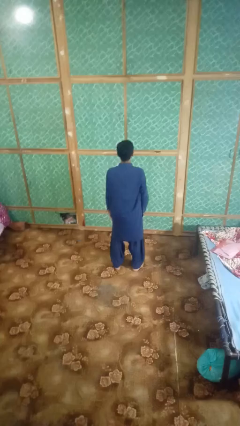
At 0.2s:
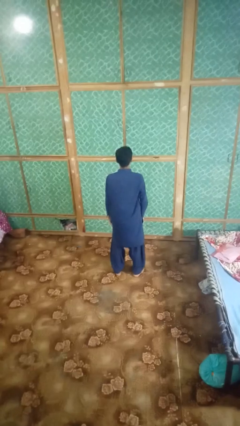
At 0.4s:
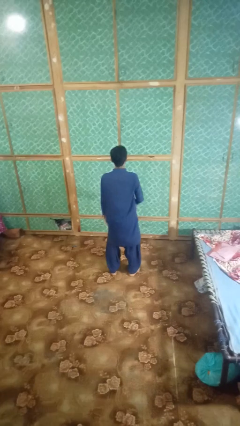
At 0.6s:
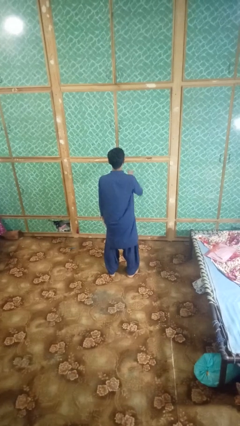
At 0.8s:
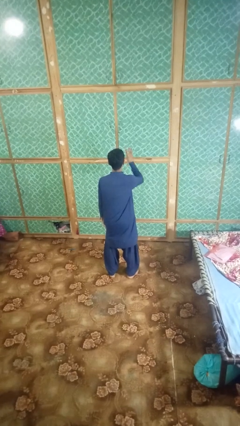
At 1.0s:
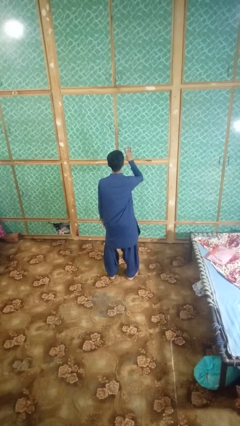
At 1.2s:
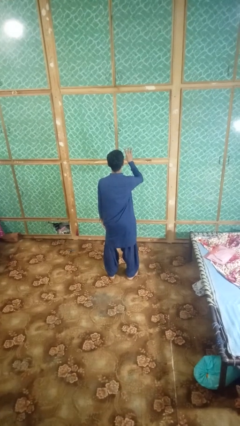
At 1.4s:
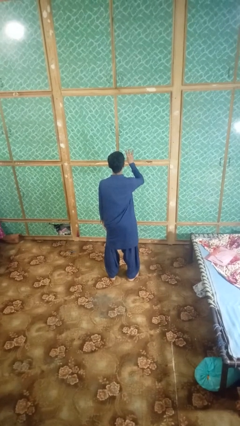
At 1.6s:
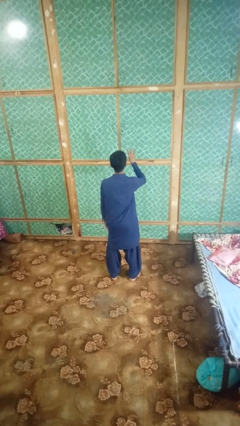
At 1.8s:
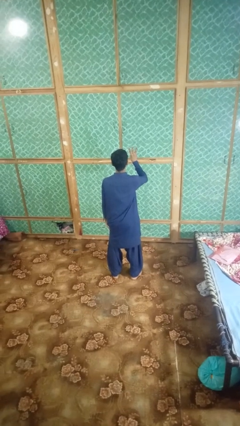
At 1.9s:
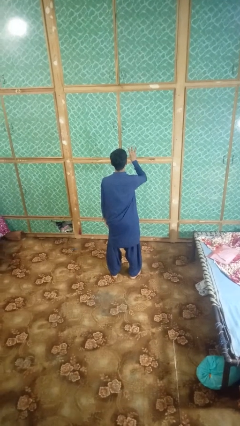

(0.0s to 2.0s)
person gestures number three

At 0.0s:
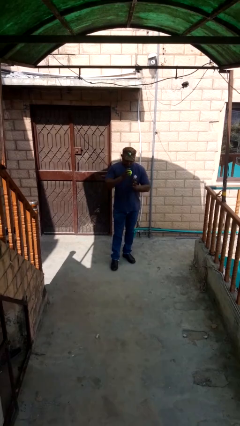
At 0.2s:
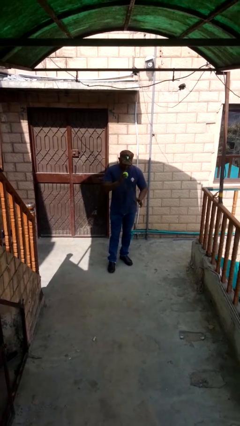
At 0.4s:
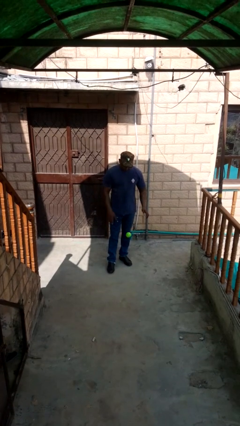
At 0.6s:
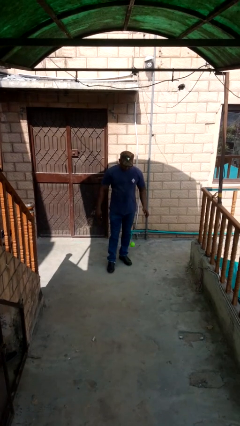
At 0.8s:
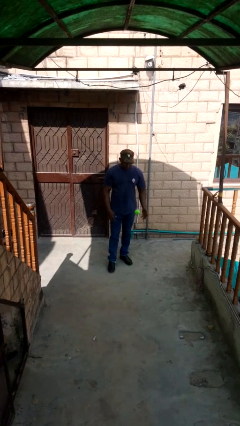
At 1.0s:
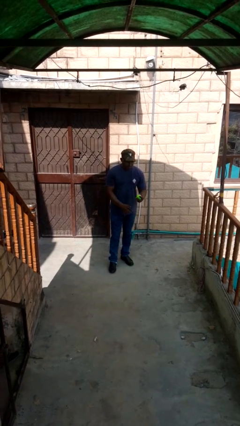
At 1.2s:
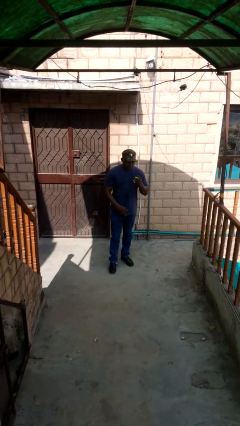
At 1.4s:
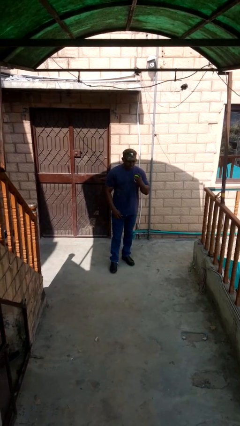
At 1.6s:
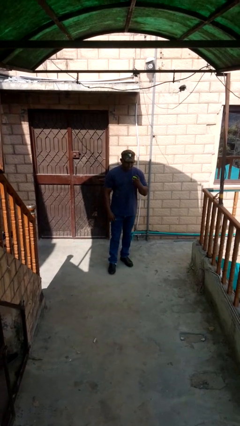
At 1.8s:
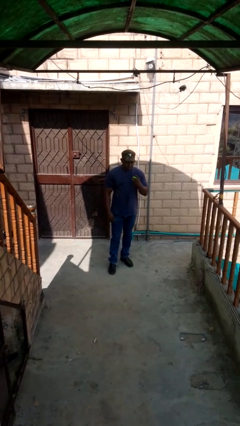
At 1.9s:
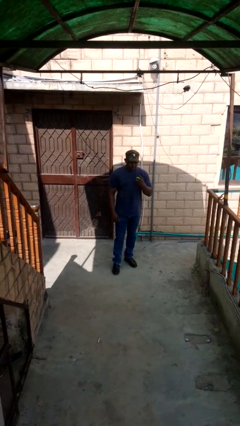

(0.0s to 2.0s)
person bounces ball on floor

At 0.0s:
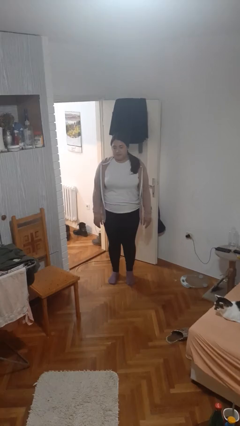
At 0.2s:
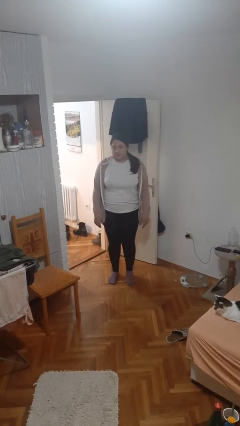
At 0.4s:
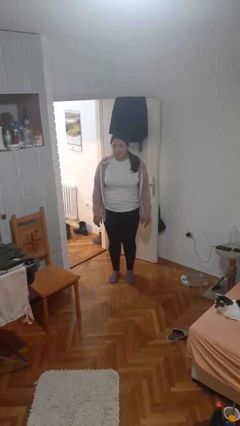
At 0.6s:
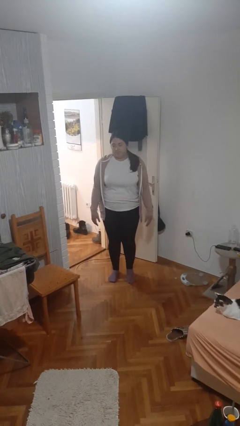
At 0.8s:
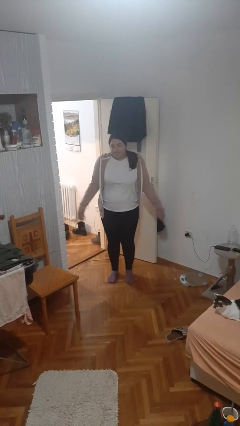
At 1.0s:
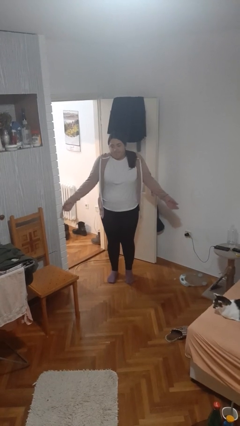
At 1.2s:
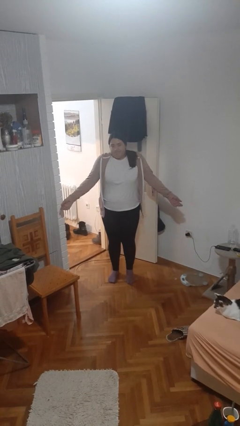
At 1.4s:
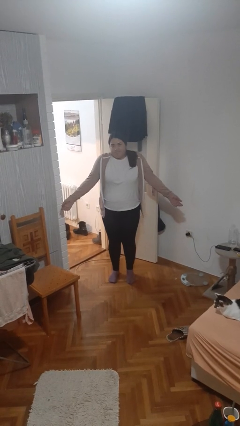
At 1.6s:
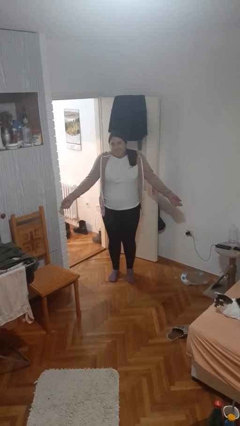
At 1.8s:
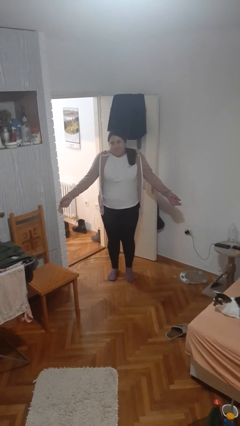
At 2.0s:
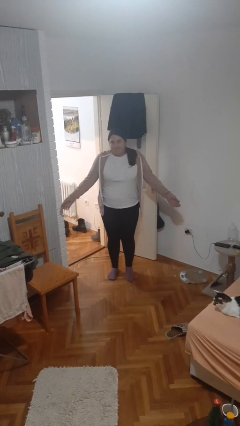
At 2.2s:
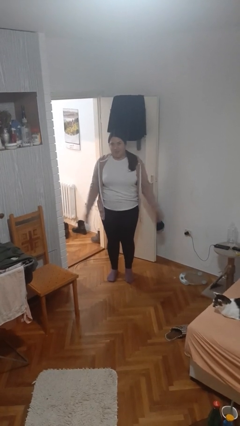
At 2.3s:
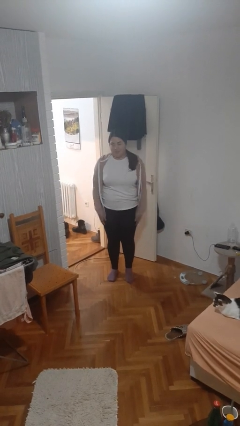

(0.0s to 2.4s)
person shrugs

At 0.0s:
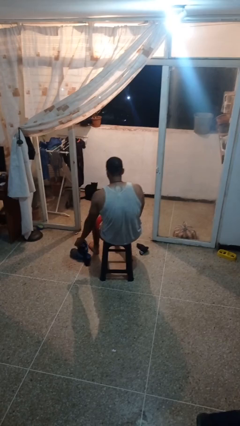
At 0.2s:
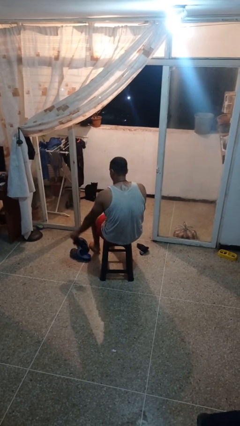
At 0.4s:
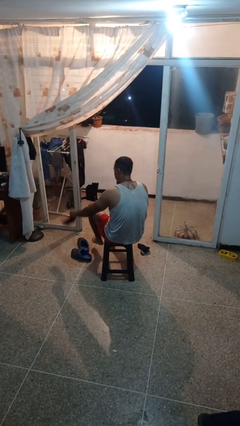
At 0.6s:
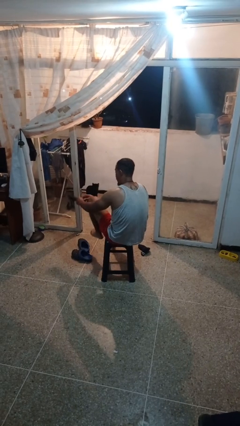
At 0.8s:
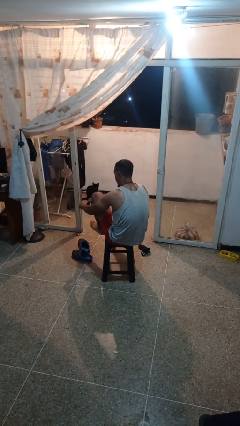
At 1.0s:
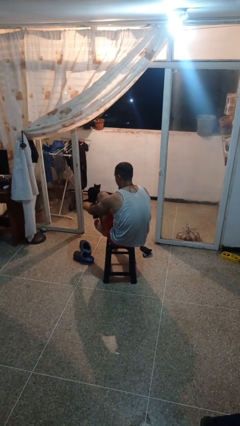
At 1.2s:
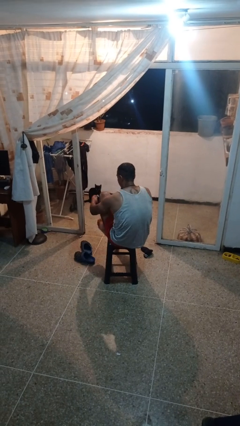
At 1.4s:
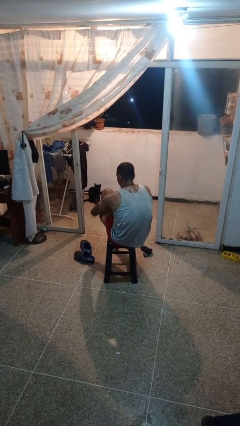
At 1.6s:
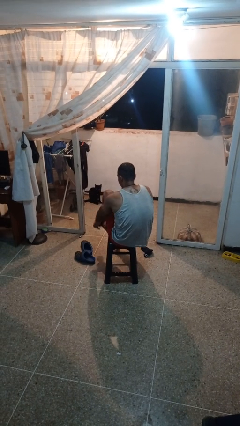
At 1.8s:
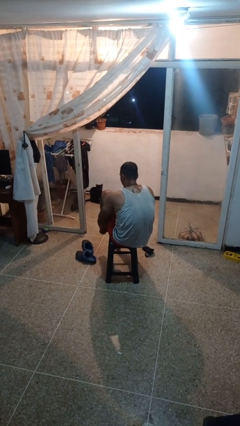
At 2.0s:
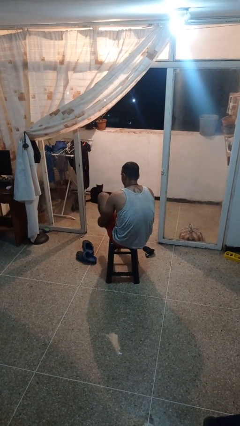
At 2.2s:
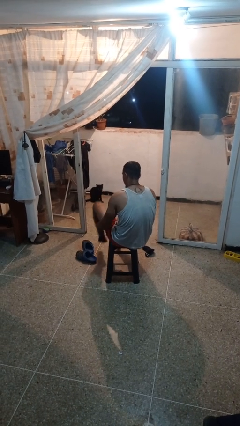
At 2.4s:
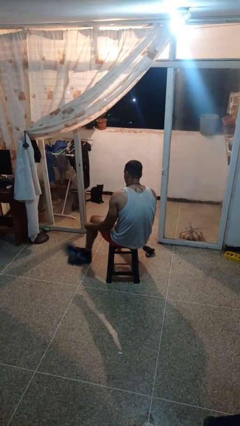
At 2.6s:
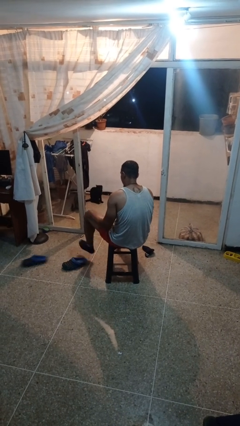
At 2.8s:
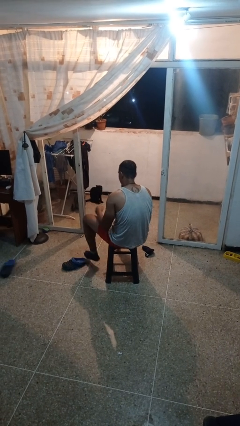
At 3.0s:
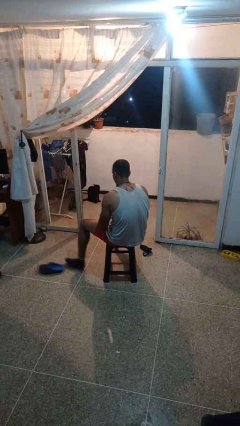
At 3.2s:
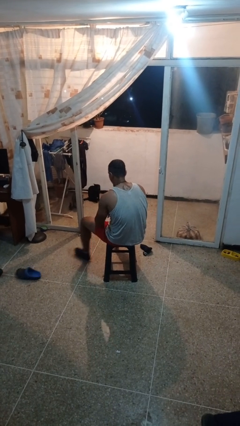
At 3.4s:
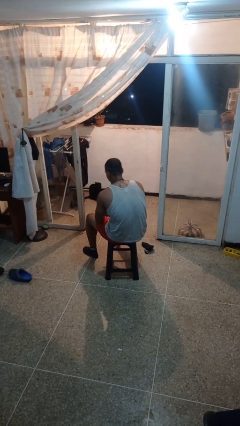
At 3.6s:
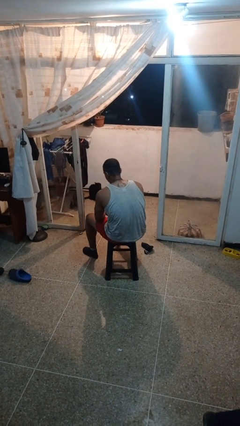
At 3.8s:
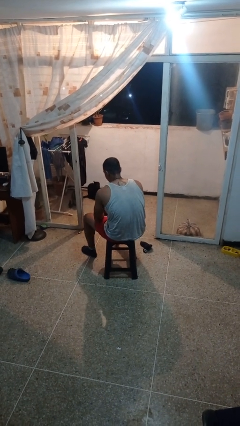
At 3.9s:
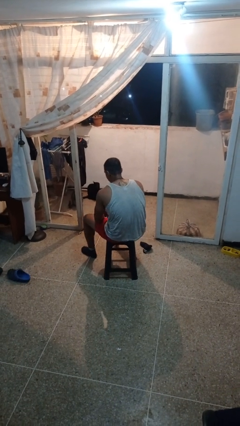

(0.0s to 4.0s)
person puts on socks

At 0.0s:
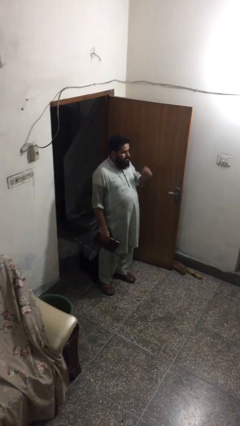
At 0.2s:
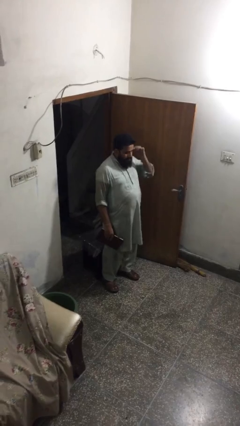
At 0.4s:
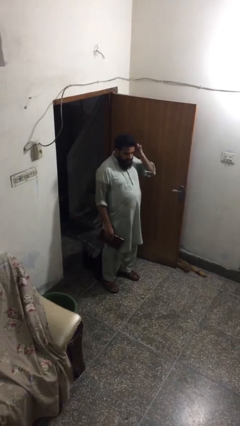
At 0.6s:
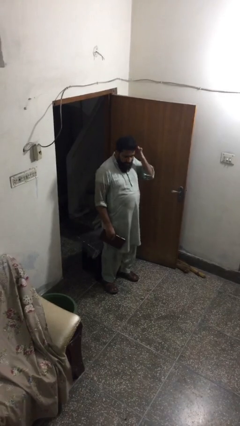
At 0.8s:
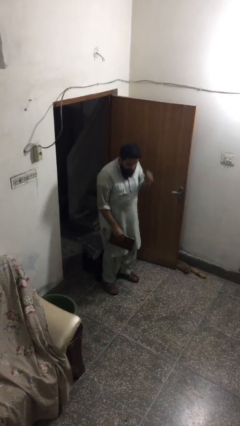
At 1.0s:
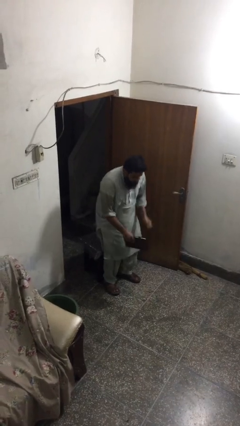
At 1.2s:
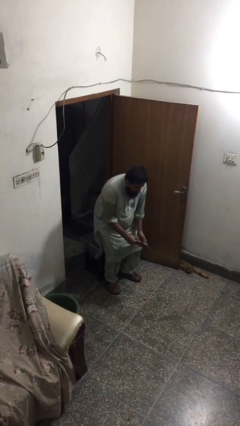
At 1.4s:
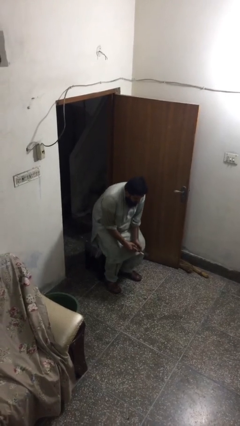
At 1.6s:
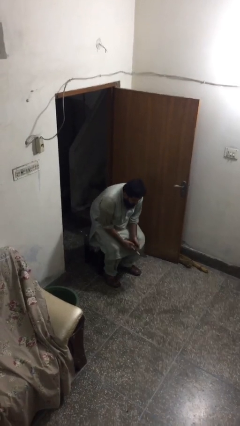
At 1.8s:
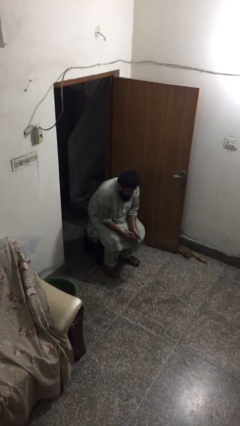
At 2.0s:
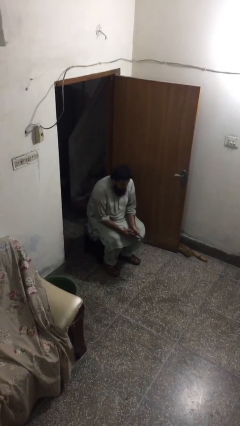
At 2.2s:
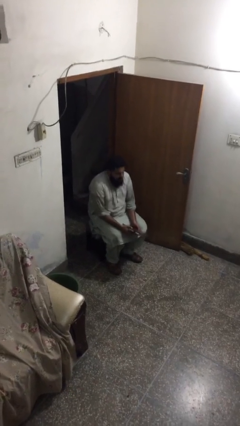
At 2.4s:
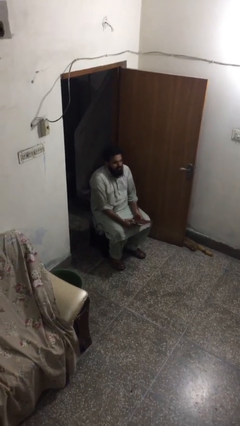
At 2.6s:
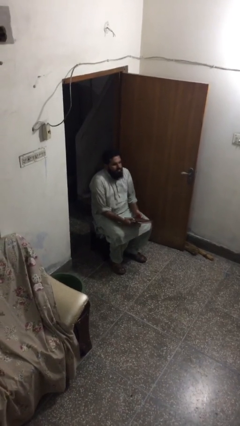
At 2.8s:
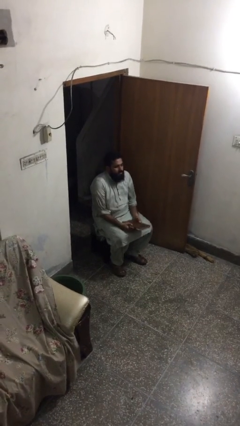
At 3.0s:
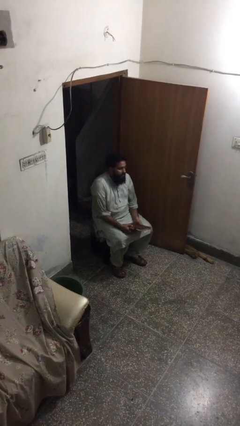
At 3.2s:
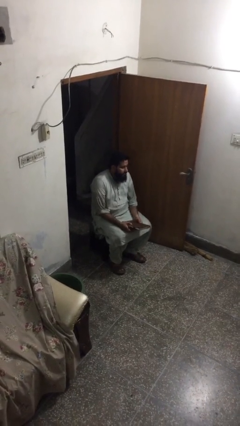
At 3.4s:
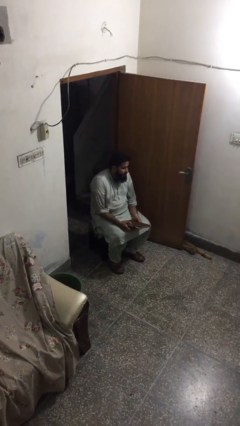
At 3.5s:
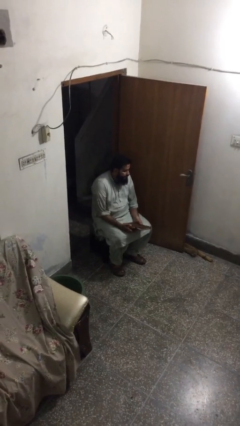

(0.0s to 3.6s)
person sits down

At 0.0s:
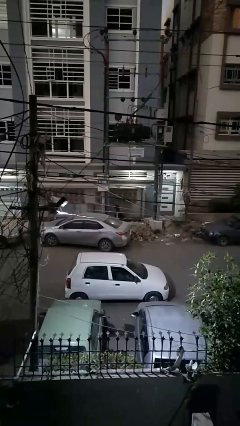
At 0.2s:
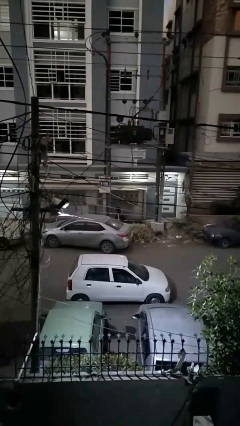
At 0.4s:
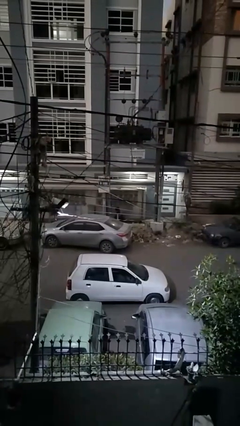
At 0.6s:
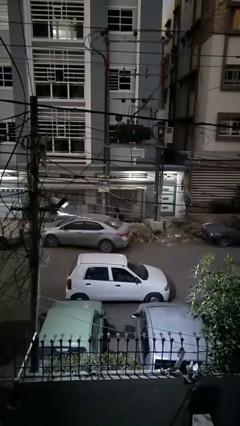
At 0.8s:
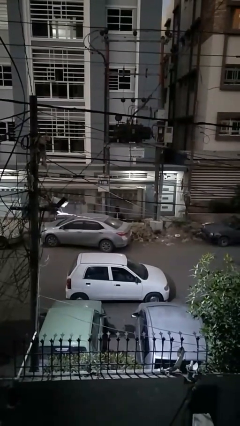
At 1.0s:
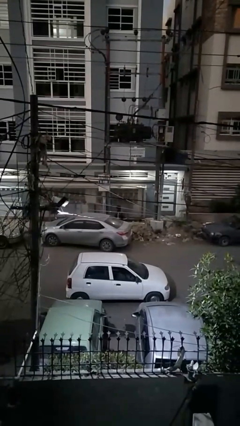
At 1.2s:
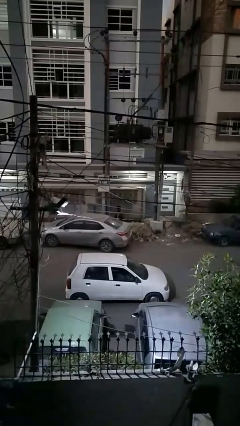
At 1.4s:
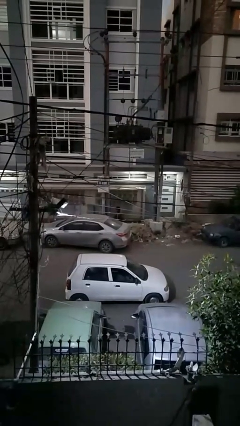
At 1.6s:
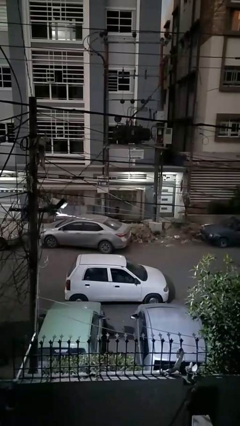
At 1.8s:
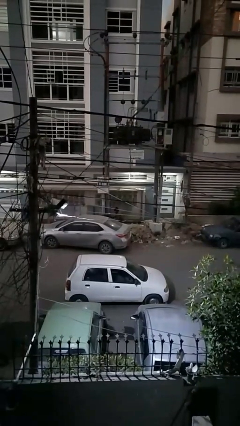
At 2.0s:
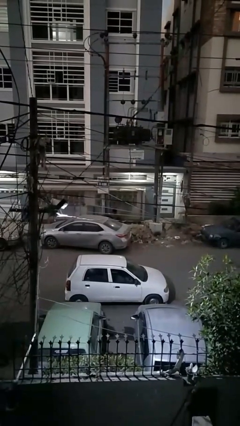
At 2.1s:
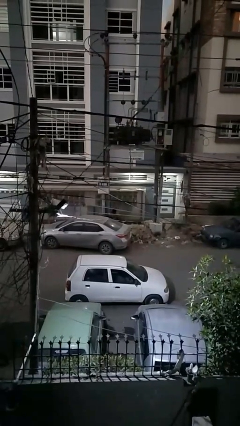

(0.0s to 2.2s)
person unloads car

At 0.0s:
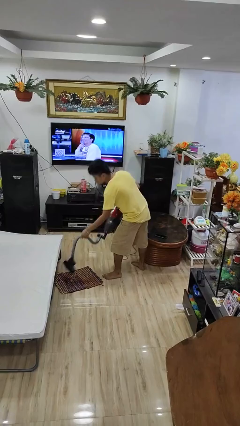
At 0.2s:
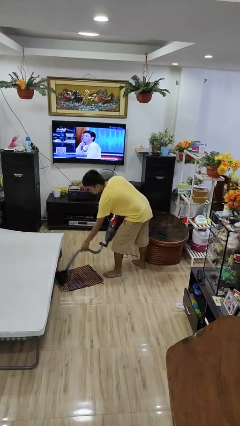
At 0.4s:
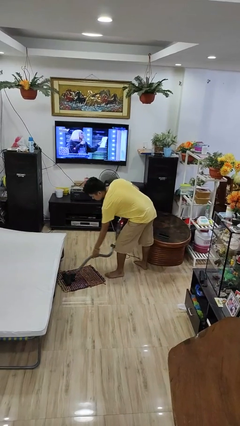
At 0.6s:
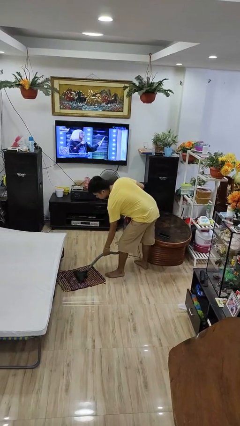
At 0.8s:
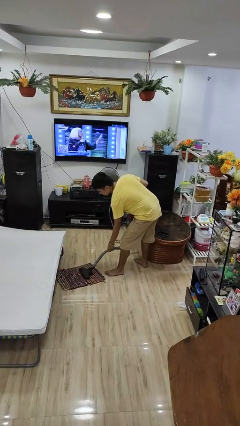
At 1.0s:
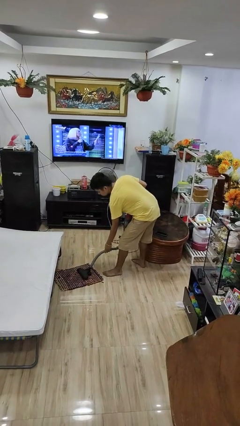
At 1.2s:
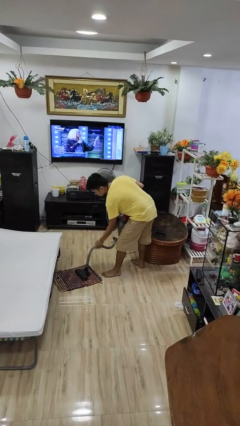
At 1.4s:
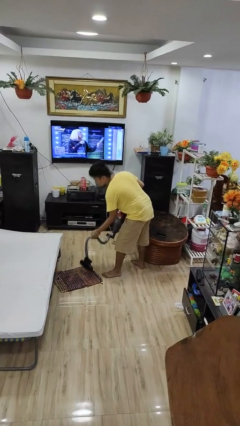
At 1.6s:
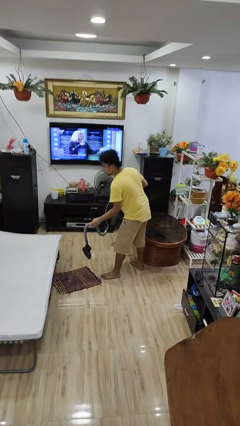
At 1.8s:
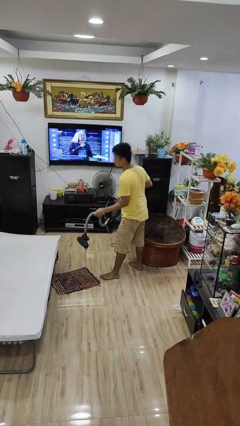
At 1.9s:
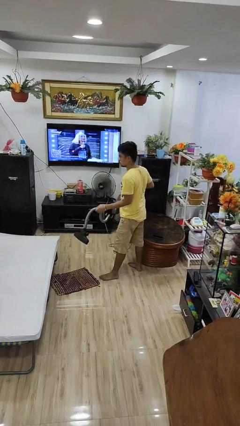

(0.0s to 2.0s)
person vacuums carpet
